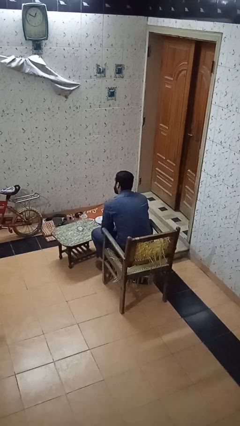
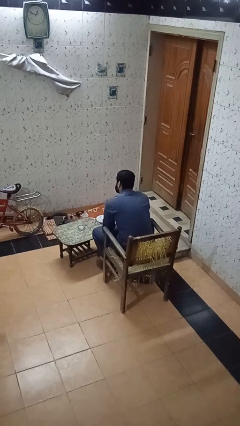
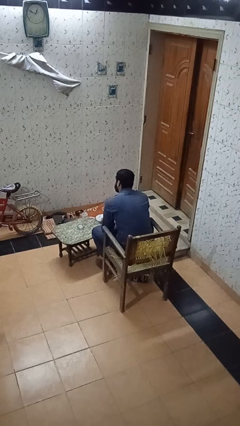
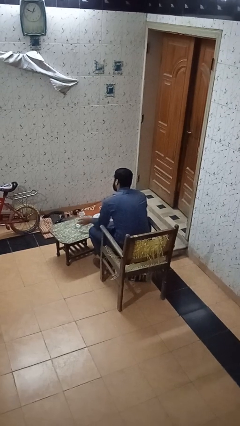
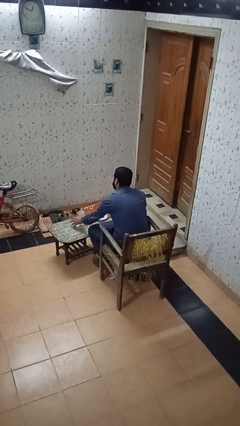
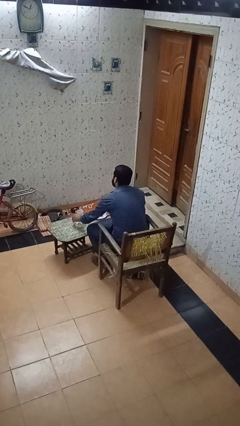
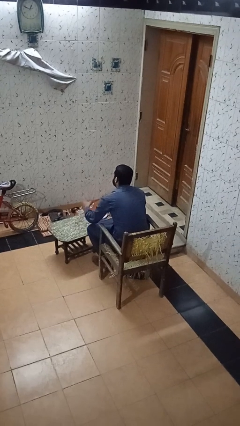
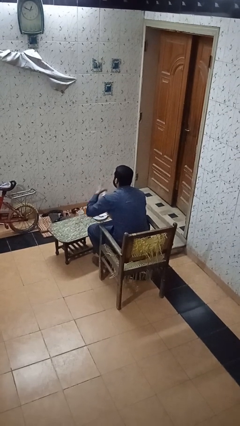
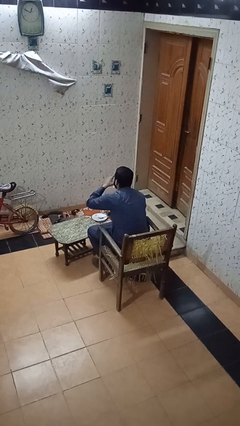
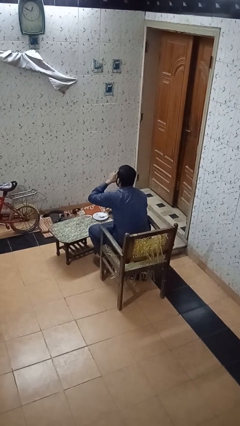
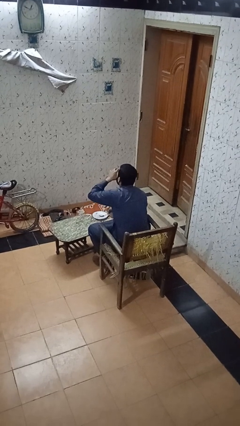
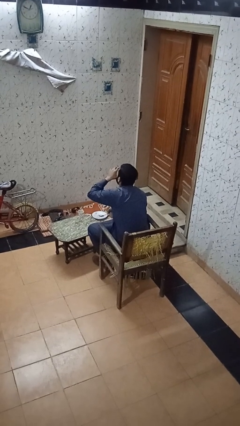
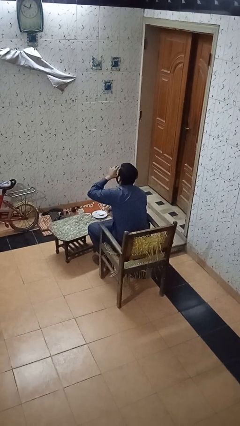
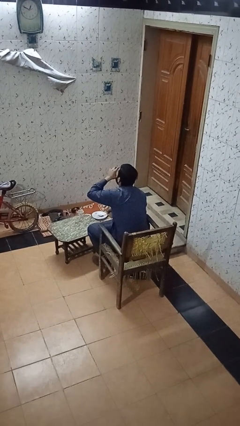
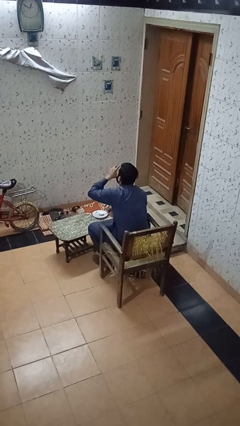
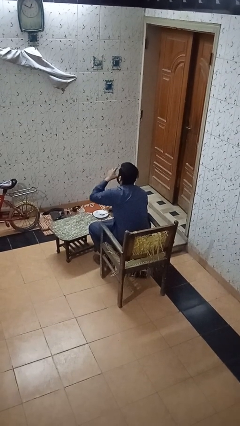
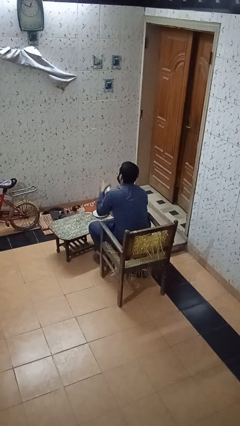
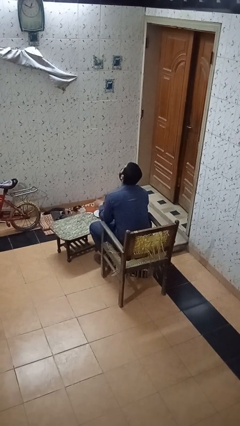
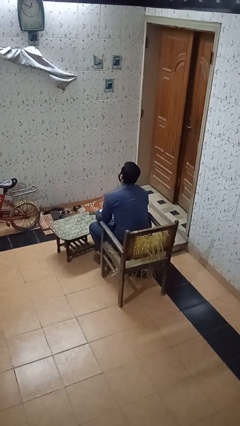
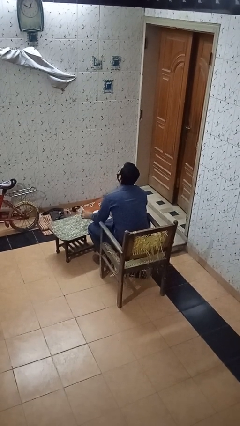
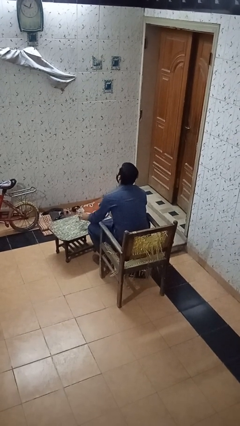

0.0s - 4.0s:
person drinks from cup

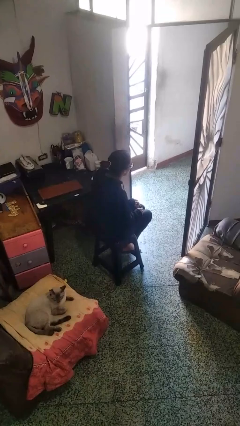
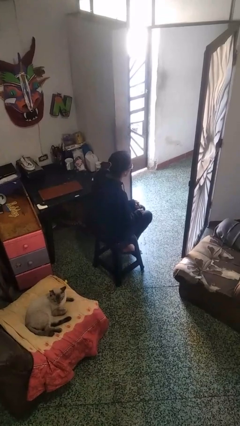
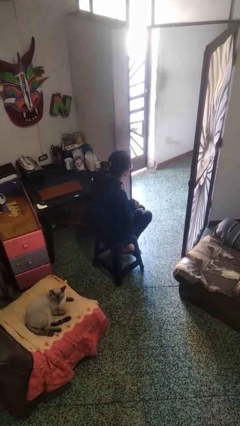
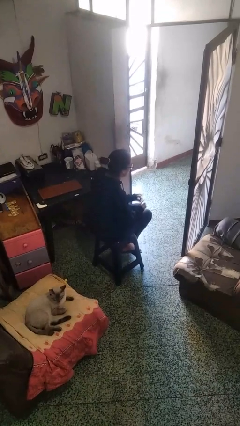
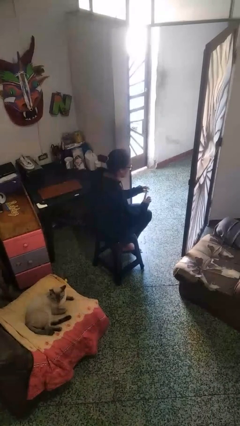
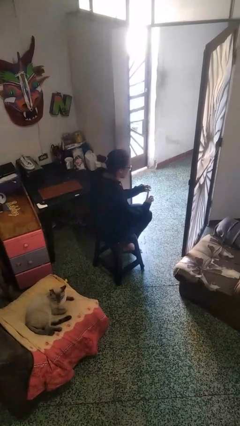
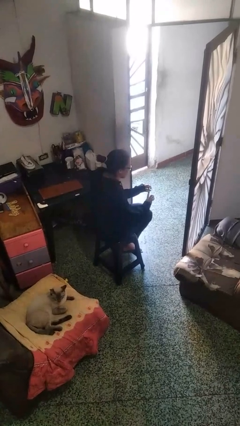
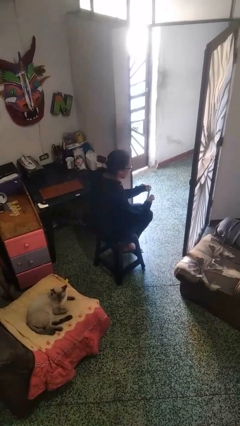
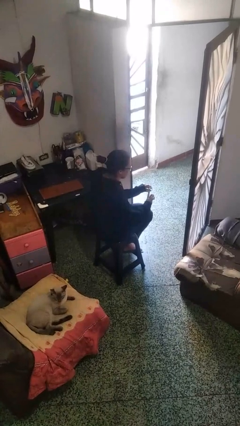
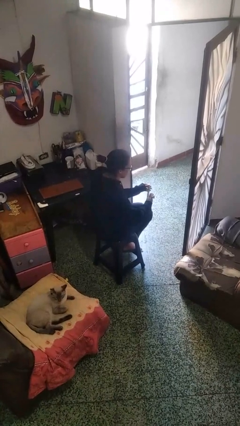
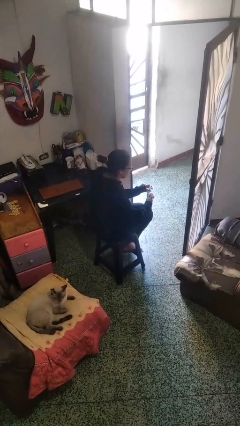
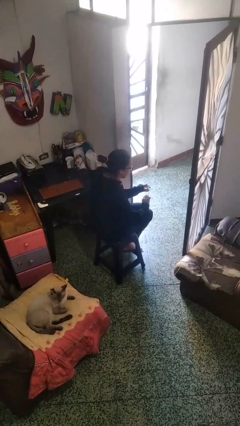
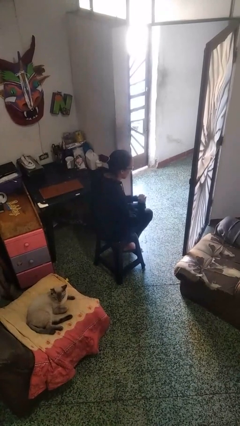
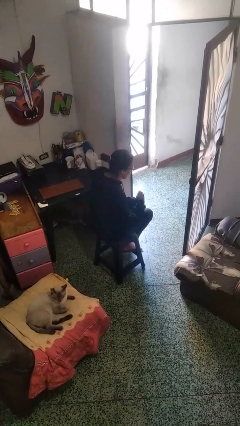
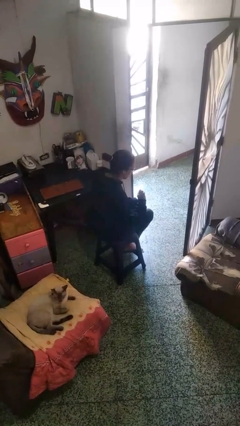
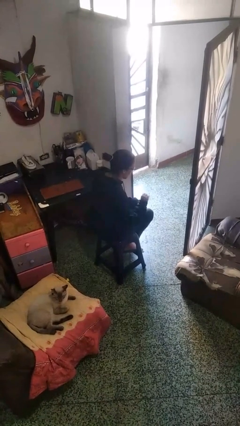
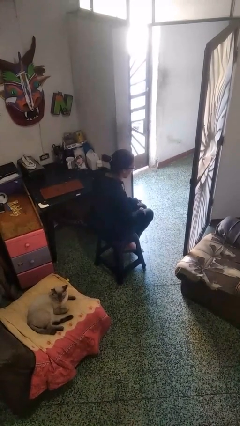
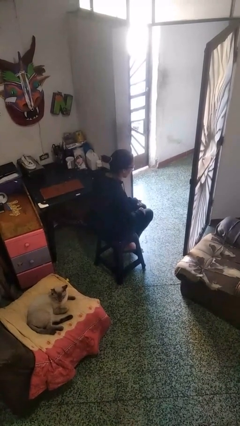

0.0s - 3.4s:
person clips fingernails

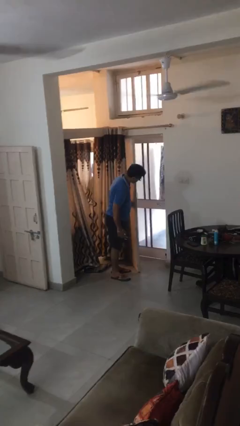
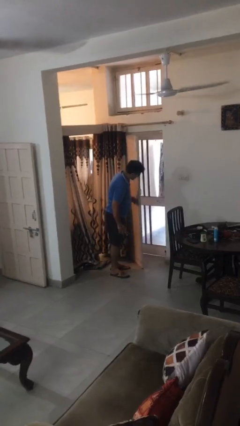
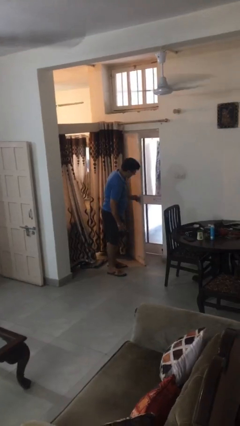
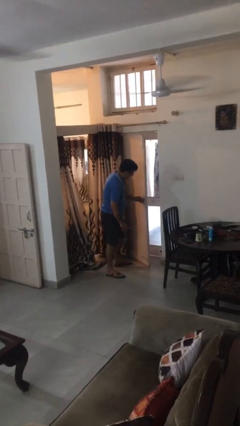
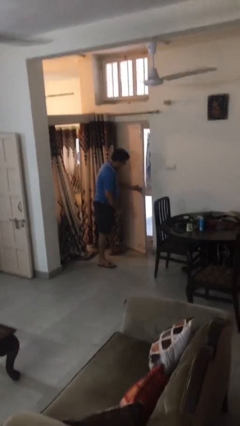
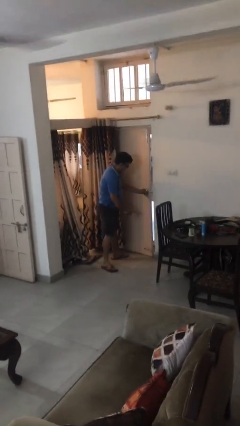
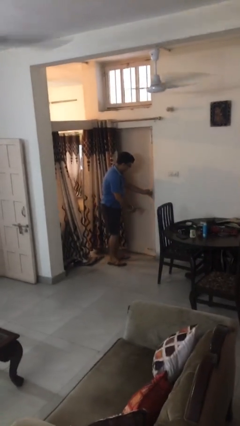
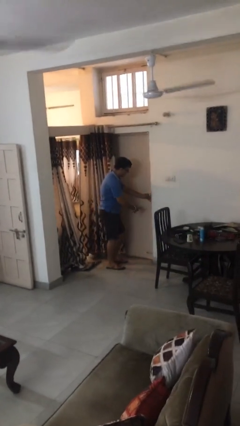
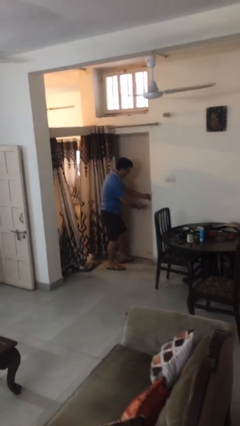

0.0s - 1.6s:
person closes facility door

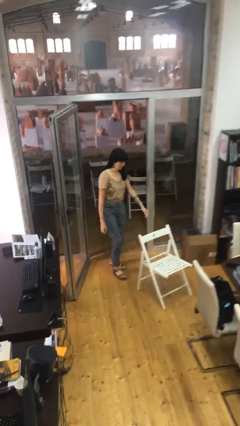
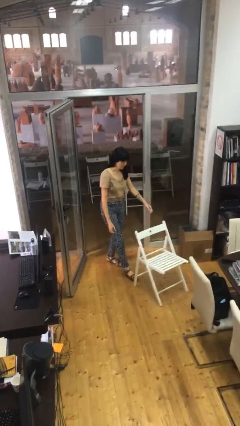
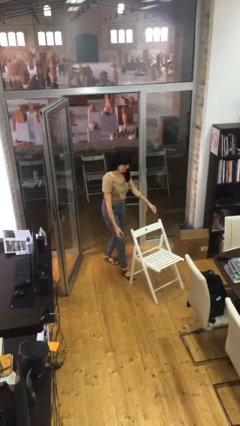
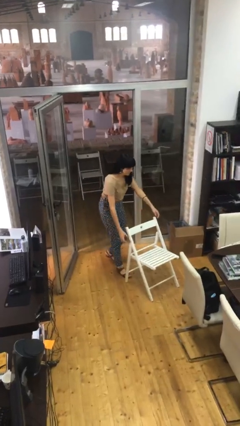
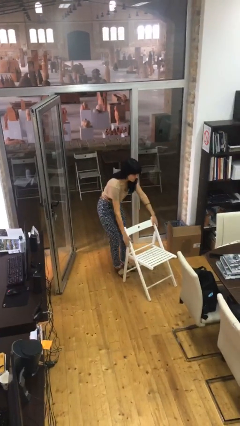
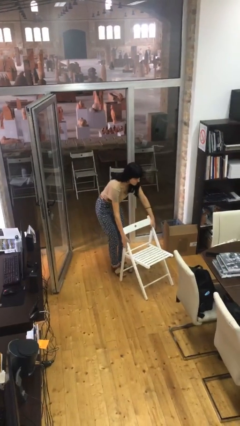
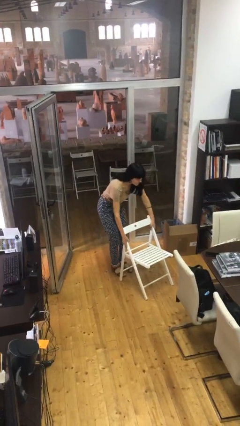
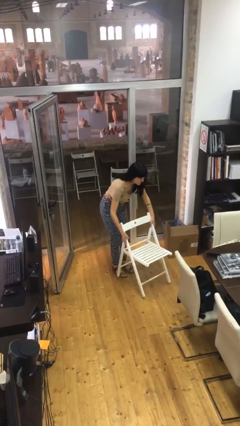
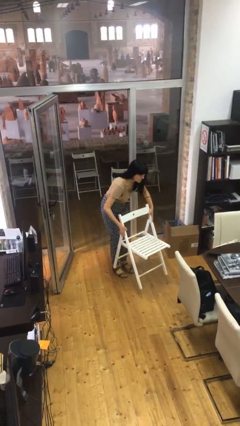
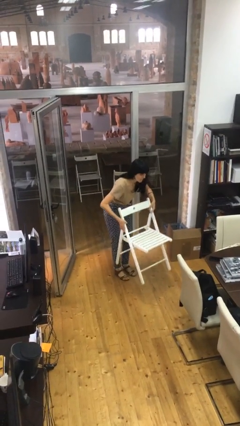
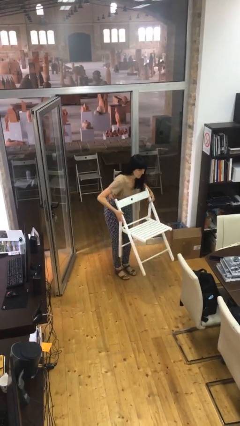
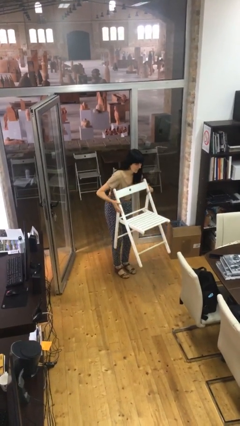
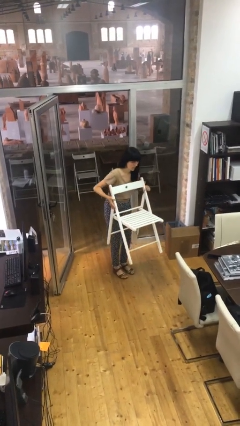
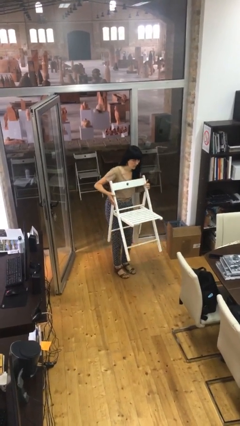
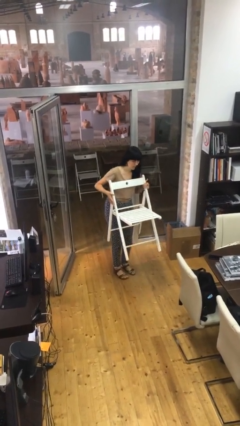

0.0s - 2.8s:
person picks up object from floor

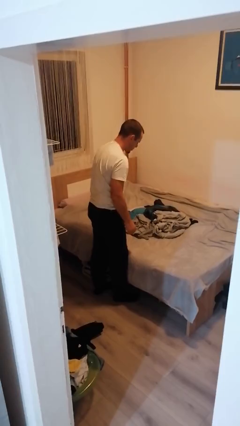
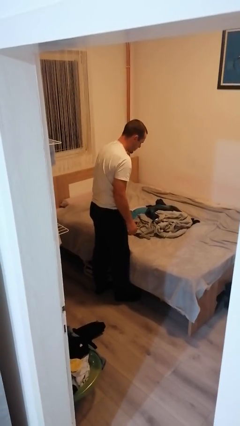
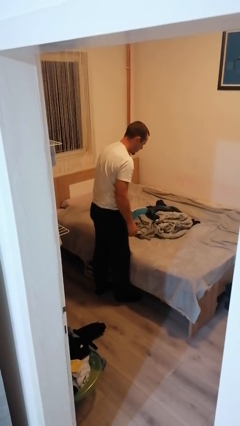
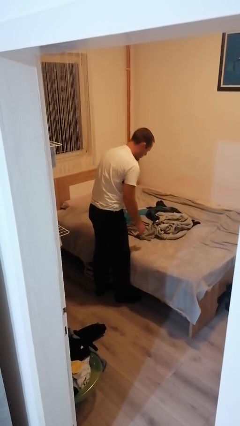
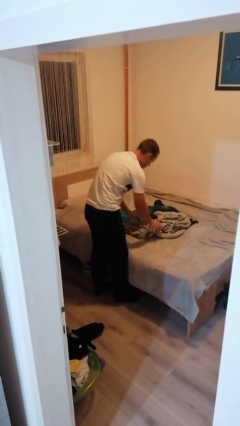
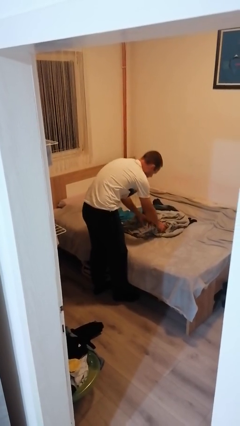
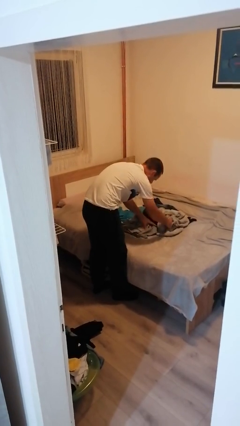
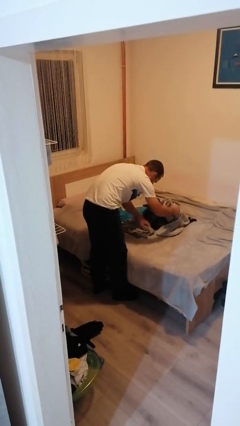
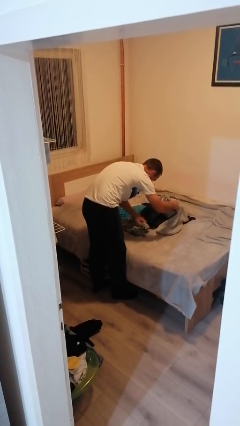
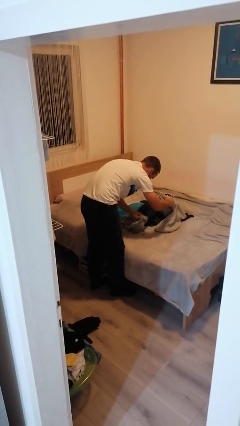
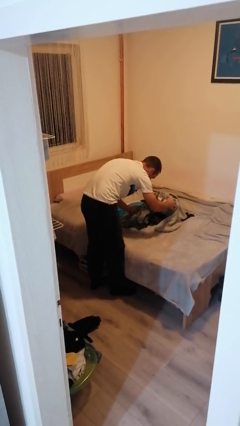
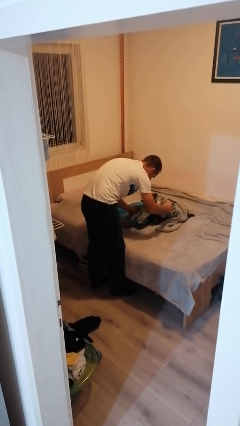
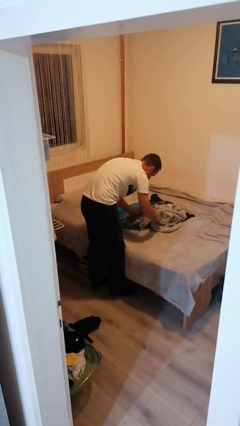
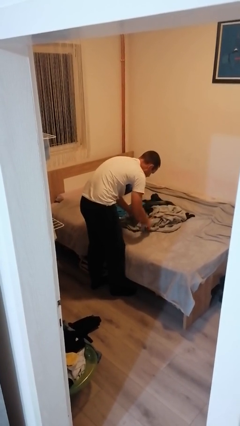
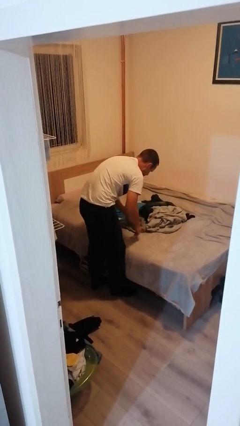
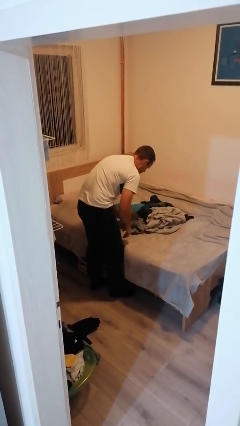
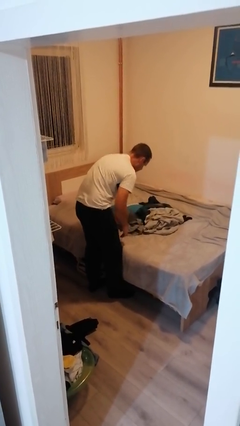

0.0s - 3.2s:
person searches under bed

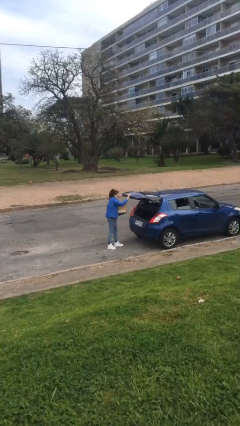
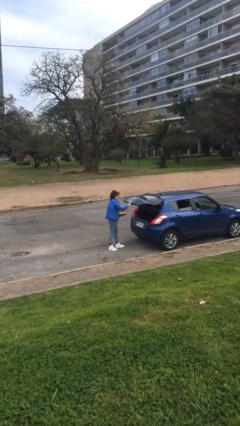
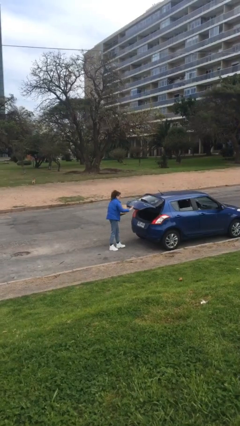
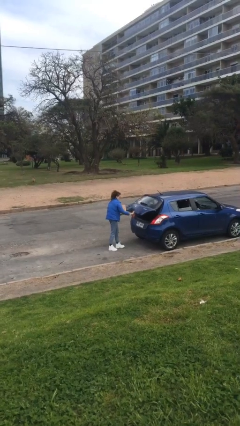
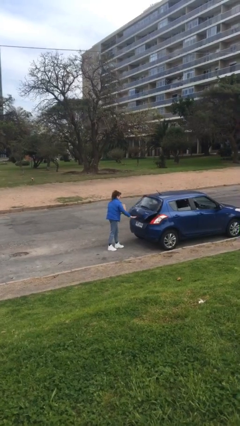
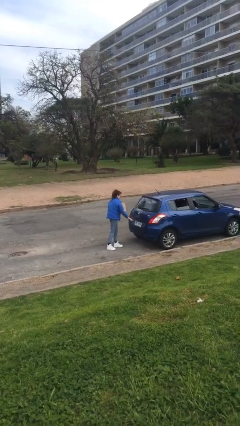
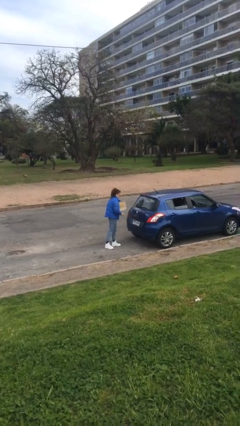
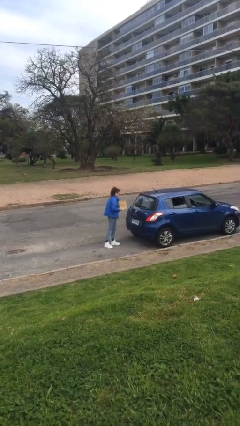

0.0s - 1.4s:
person closes car door

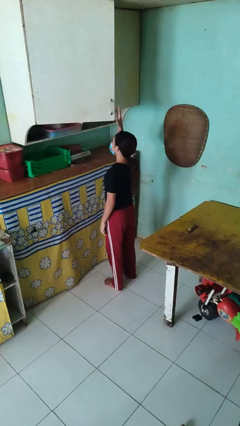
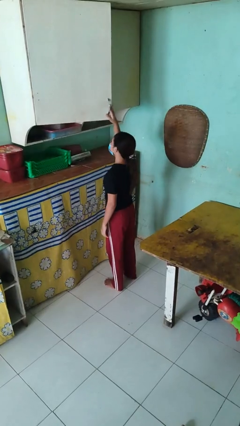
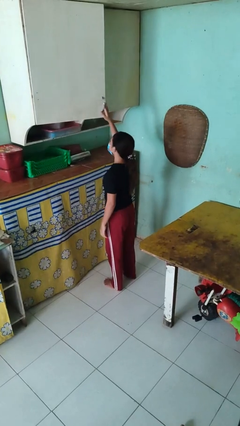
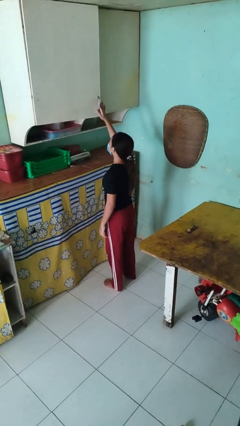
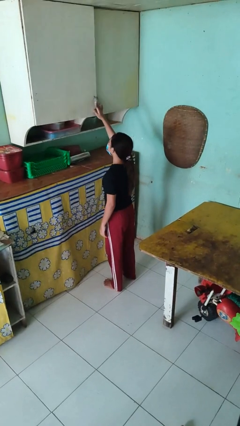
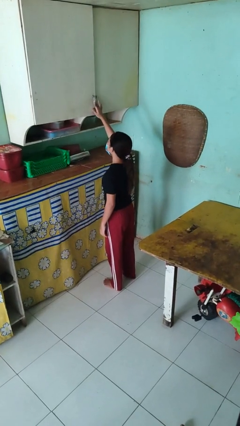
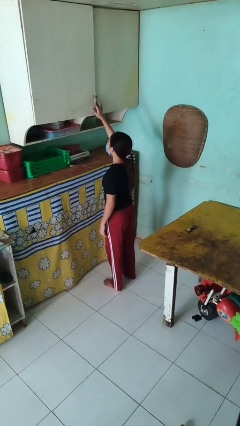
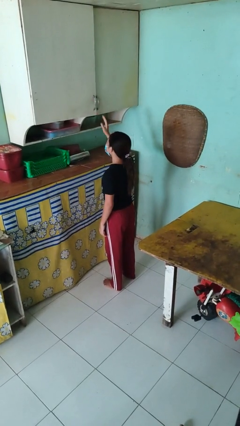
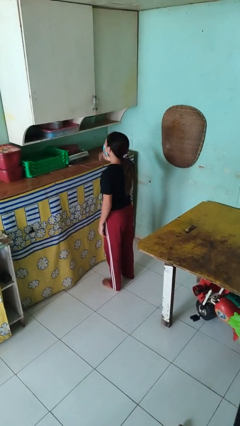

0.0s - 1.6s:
person closes cabinet
